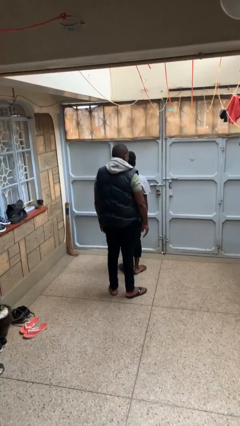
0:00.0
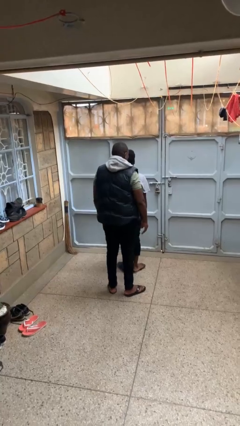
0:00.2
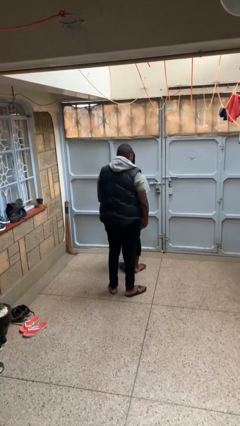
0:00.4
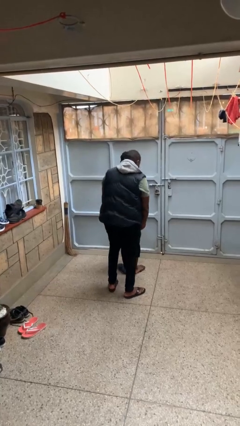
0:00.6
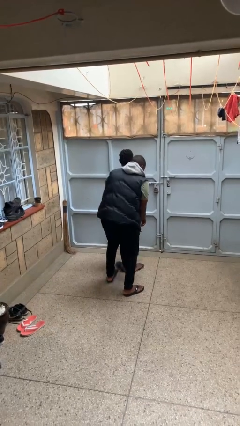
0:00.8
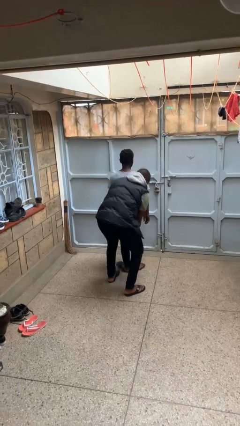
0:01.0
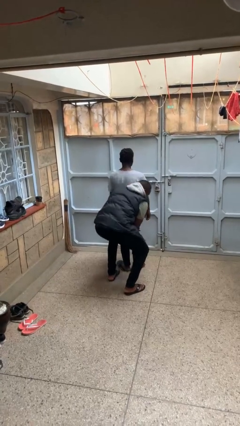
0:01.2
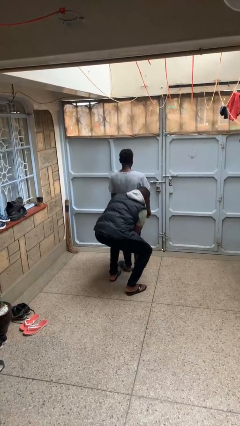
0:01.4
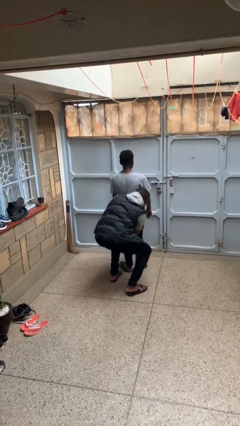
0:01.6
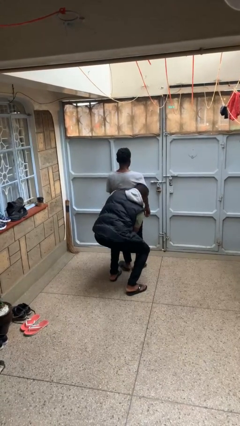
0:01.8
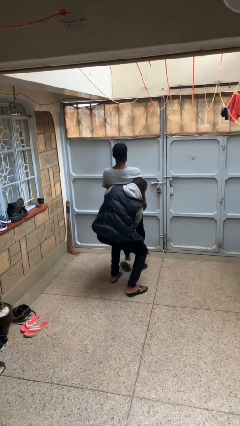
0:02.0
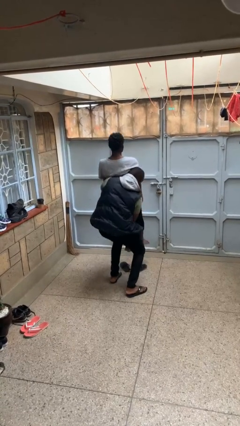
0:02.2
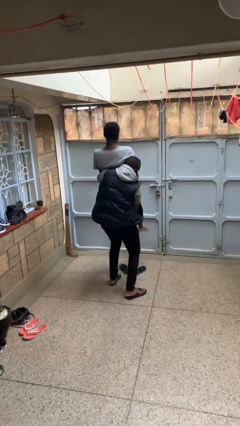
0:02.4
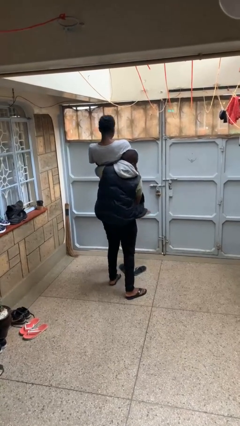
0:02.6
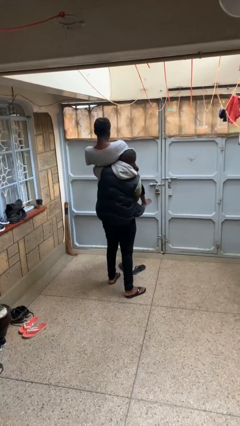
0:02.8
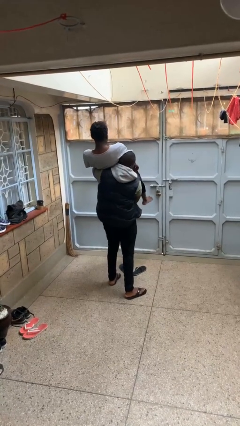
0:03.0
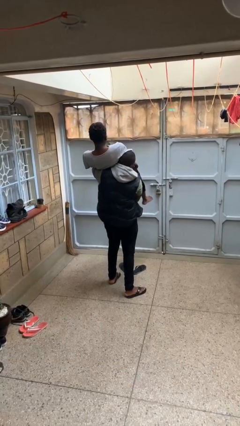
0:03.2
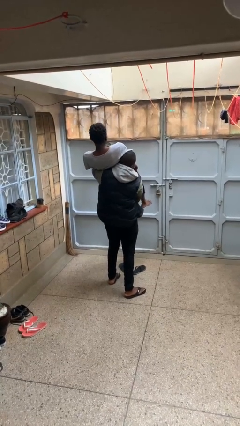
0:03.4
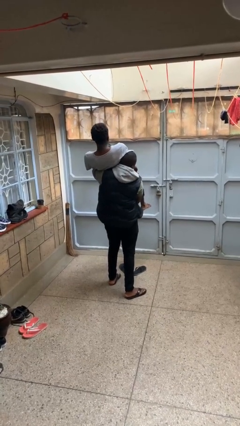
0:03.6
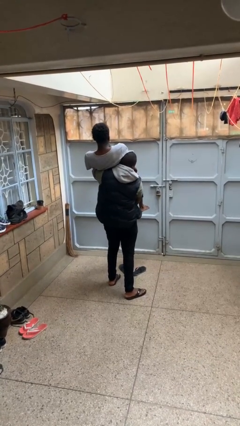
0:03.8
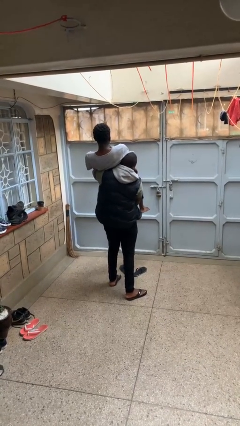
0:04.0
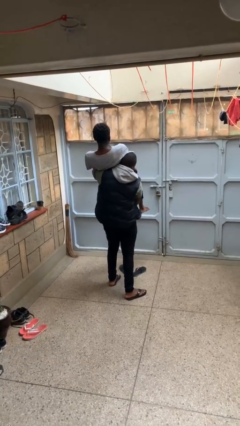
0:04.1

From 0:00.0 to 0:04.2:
person carries person over shoulder

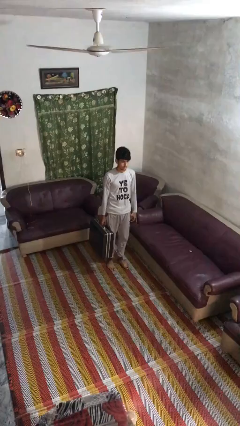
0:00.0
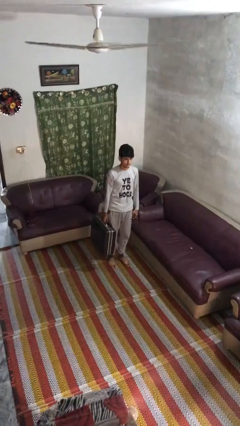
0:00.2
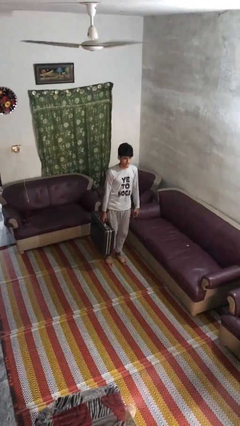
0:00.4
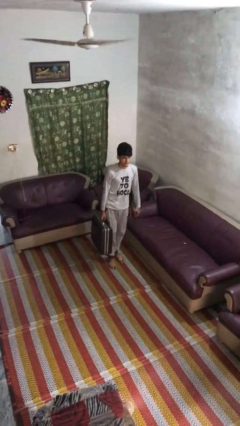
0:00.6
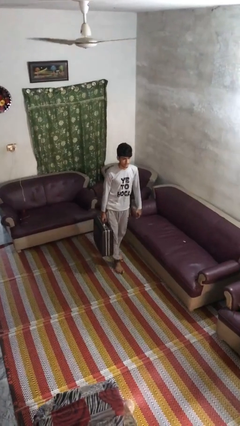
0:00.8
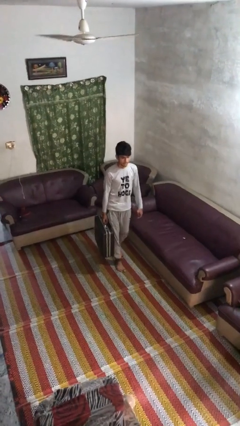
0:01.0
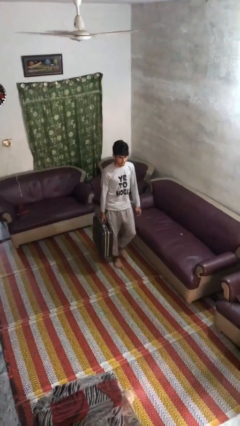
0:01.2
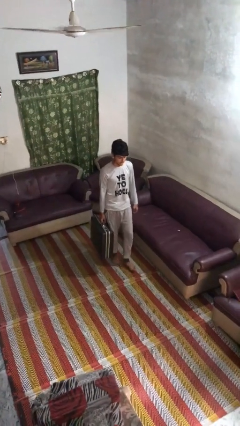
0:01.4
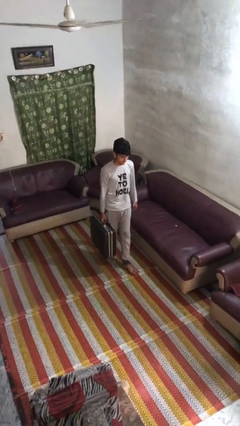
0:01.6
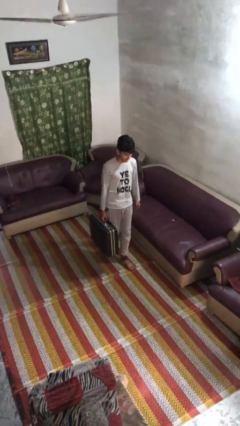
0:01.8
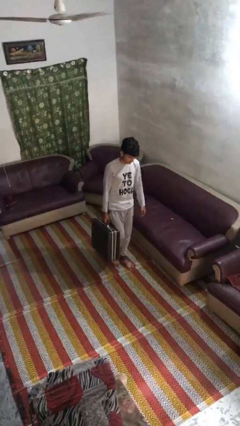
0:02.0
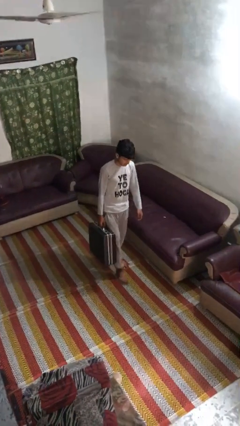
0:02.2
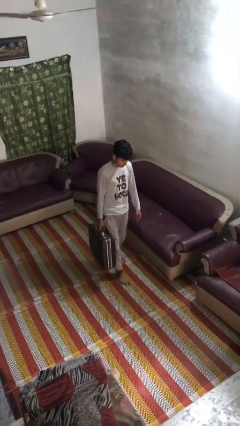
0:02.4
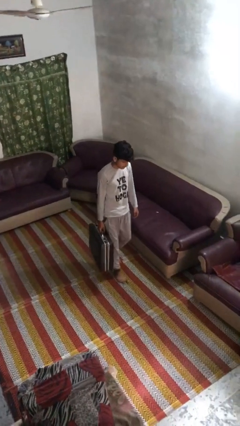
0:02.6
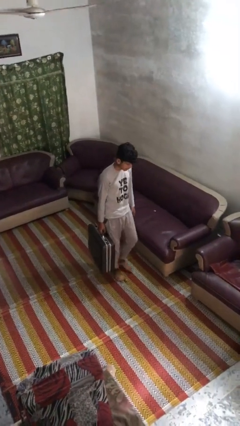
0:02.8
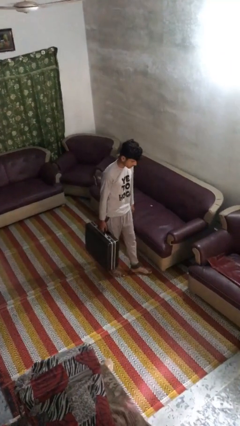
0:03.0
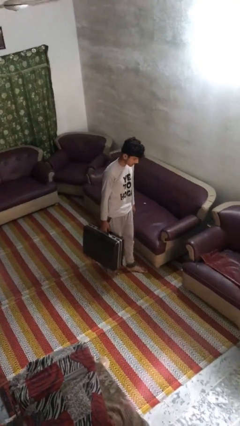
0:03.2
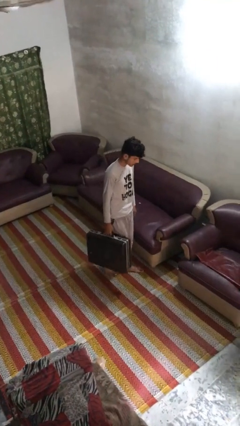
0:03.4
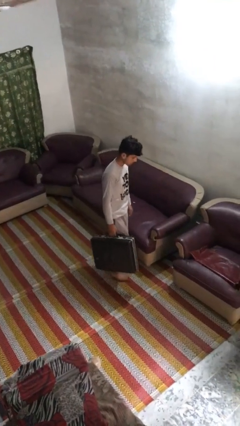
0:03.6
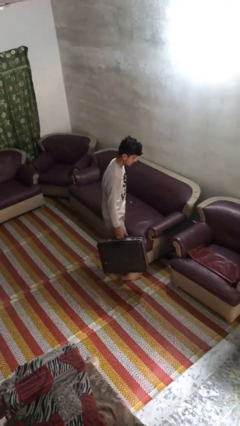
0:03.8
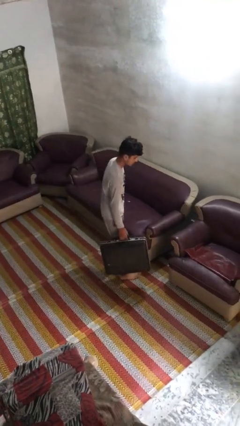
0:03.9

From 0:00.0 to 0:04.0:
person carries heavy object

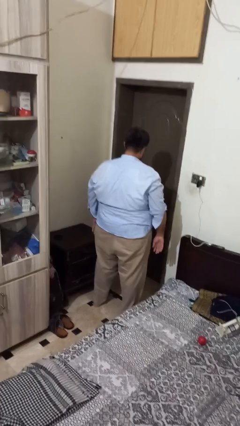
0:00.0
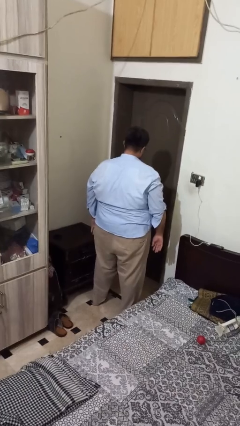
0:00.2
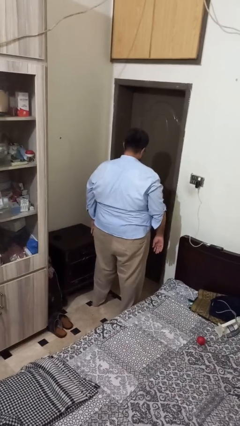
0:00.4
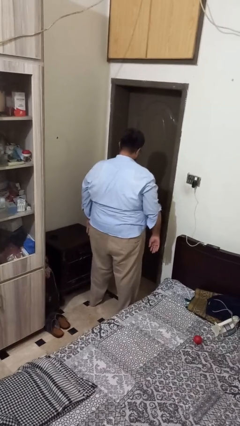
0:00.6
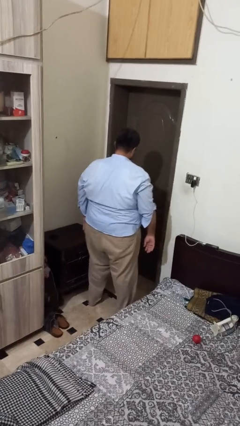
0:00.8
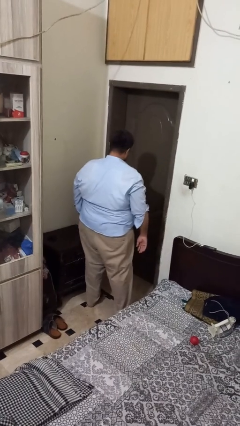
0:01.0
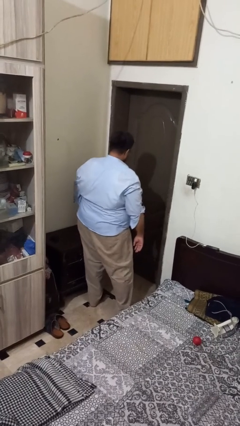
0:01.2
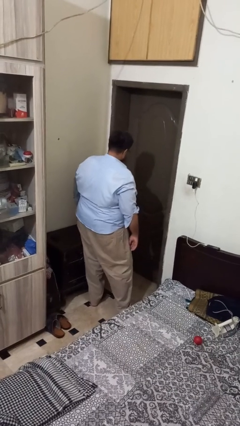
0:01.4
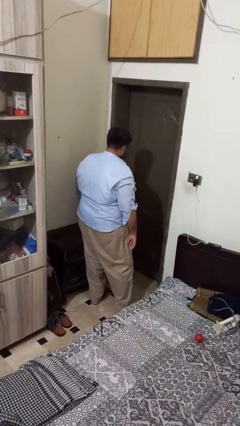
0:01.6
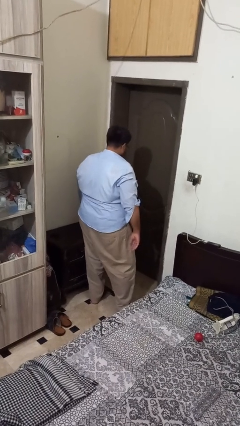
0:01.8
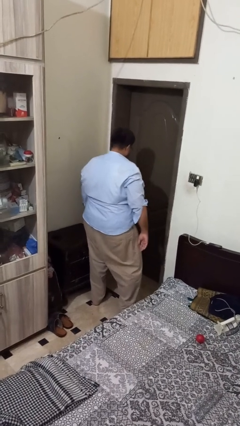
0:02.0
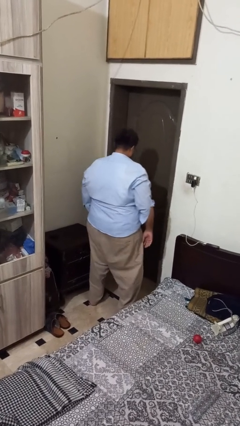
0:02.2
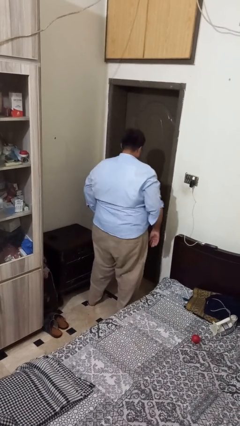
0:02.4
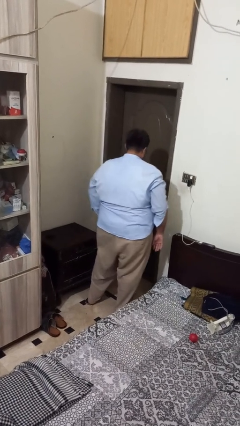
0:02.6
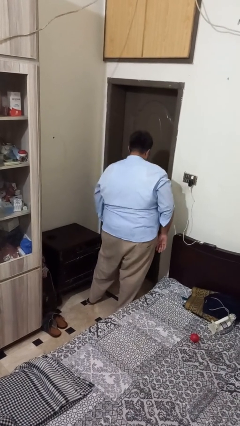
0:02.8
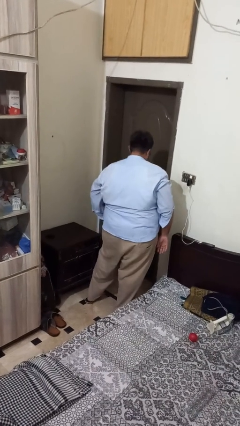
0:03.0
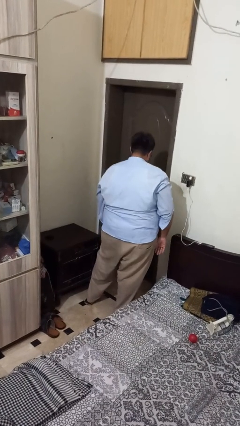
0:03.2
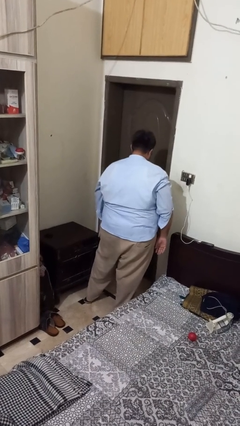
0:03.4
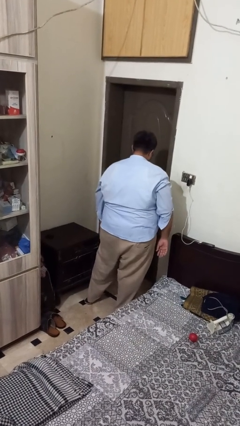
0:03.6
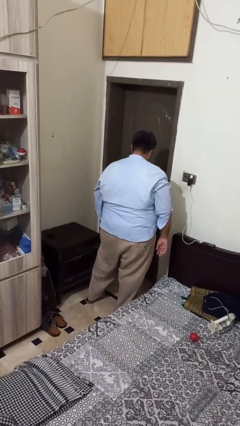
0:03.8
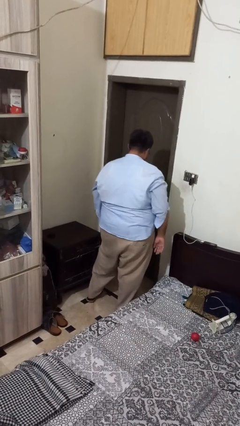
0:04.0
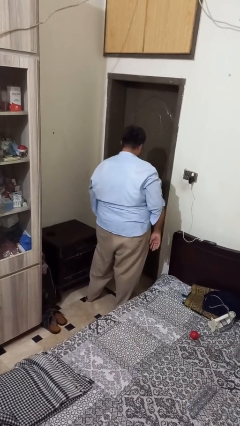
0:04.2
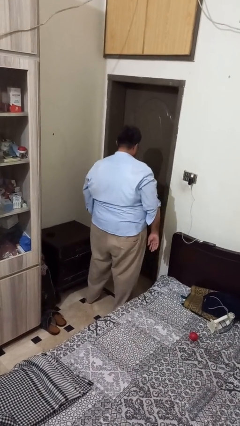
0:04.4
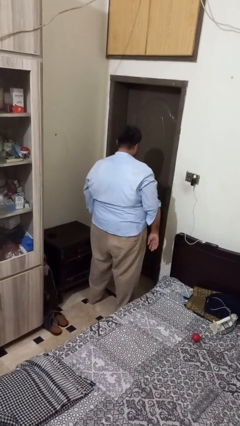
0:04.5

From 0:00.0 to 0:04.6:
person bumps into table

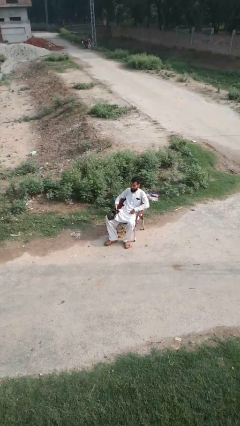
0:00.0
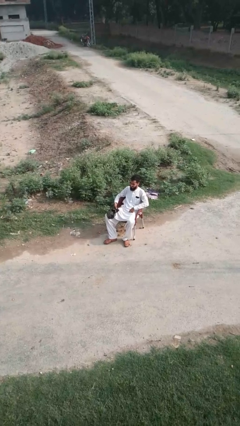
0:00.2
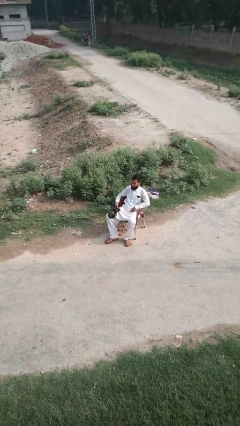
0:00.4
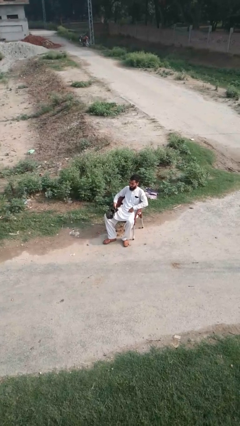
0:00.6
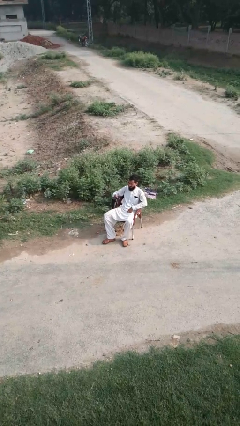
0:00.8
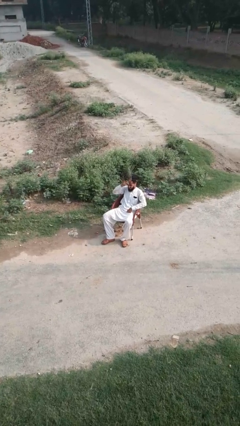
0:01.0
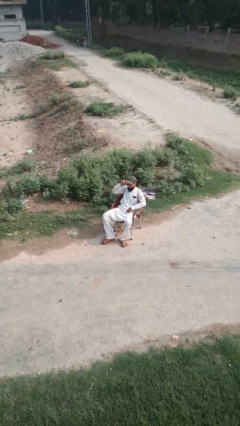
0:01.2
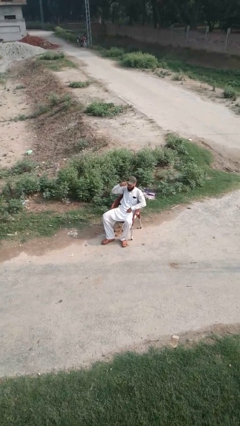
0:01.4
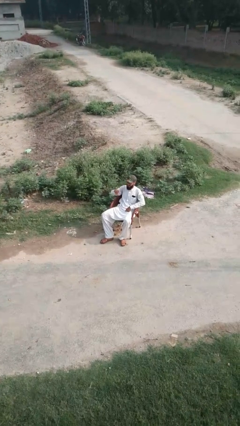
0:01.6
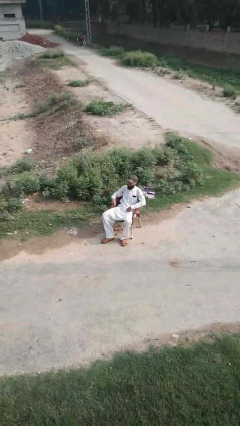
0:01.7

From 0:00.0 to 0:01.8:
person puts on hat

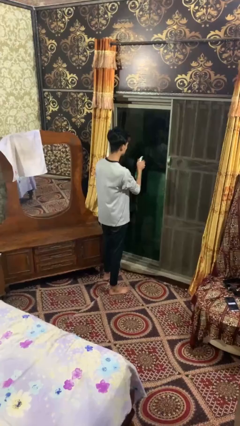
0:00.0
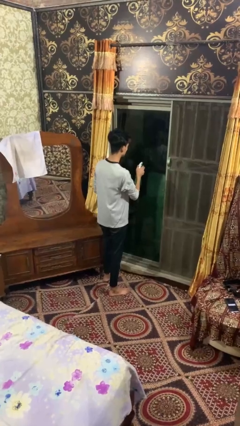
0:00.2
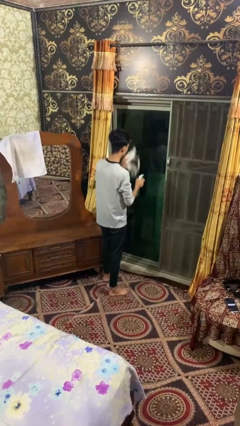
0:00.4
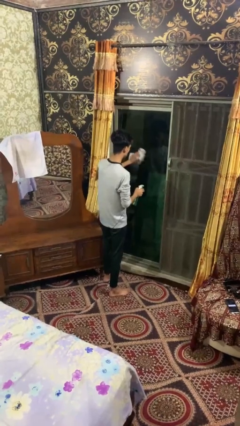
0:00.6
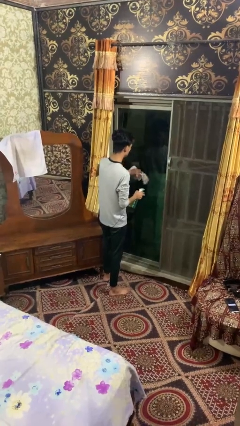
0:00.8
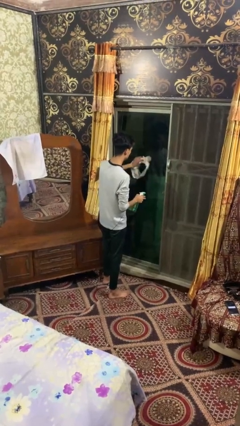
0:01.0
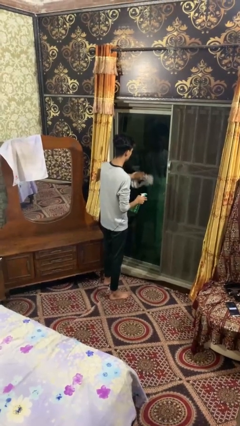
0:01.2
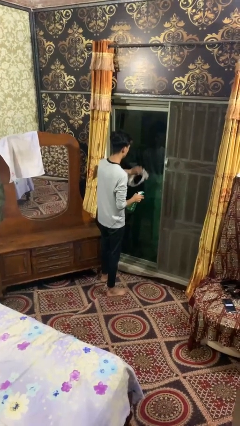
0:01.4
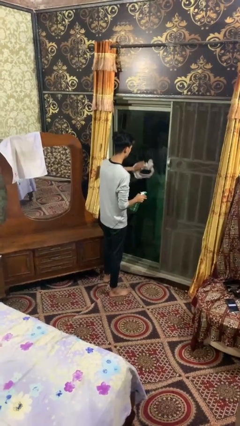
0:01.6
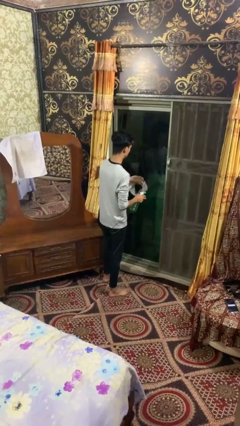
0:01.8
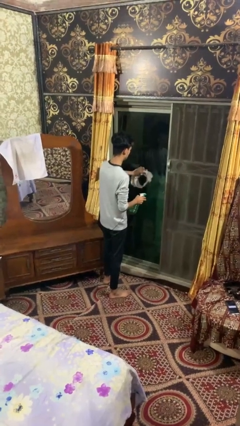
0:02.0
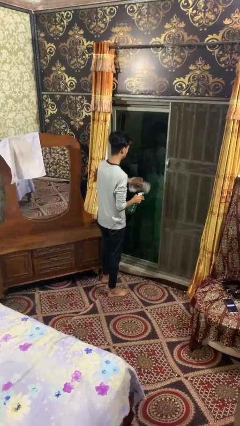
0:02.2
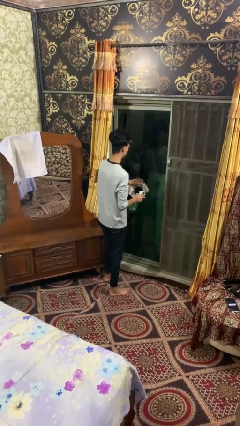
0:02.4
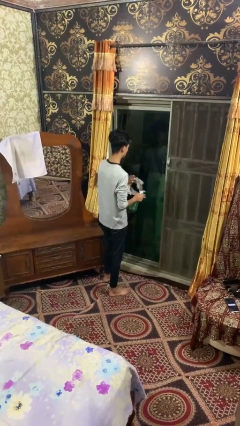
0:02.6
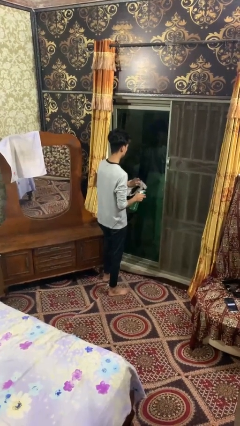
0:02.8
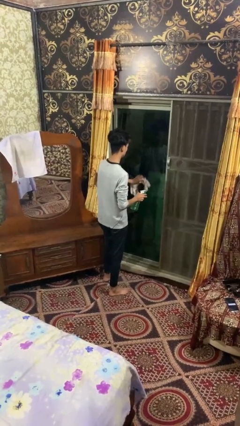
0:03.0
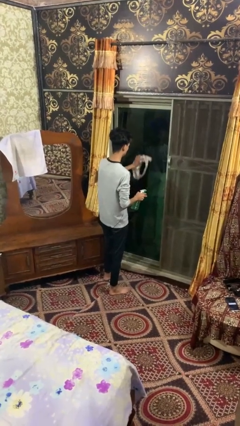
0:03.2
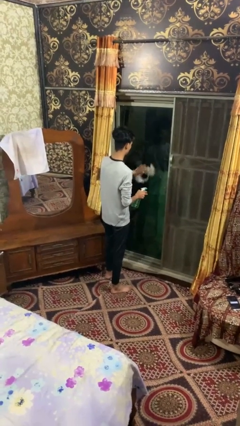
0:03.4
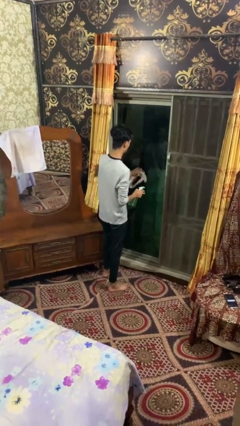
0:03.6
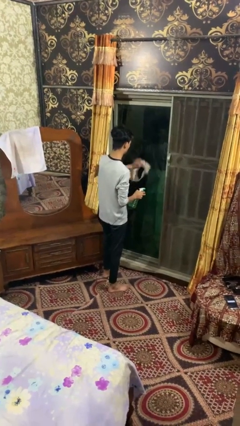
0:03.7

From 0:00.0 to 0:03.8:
person washes window
